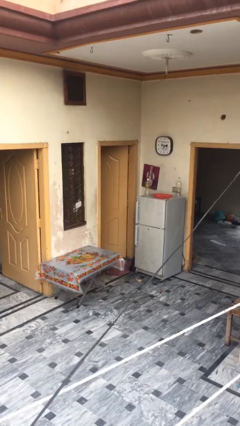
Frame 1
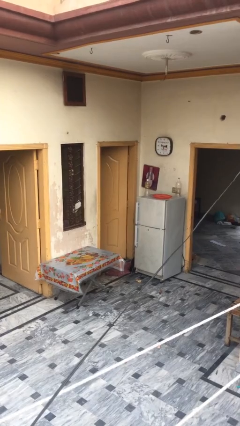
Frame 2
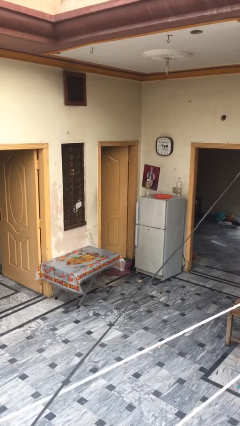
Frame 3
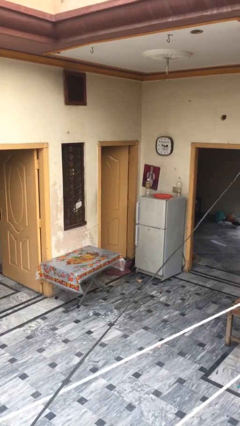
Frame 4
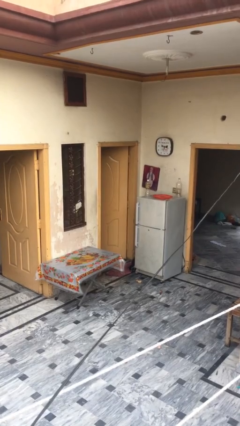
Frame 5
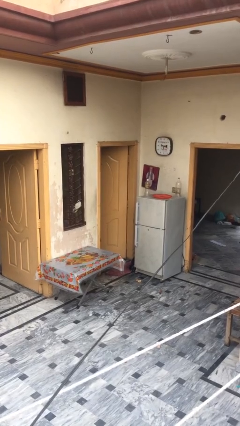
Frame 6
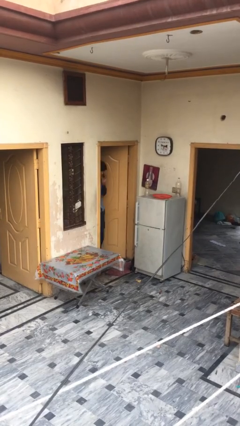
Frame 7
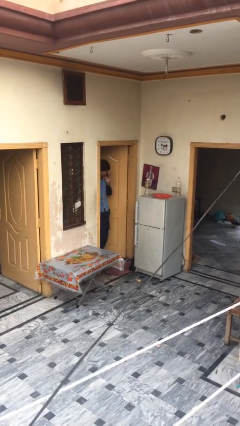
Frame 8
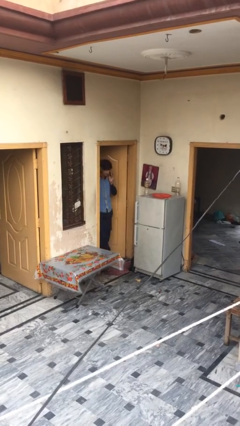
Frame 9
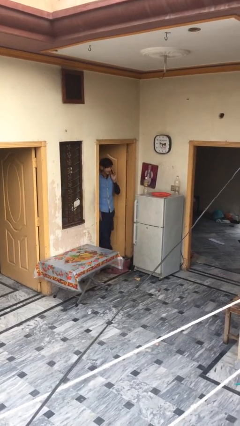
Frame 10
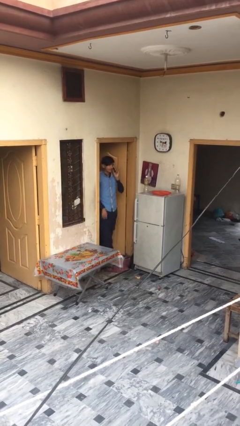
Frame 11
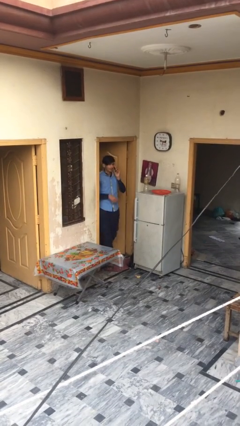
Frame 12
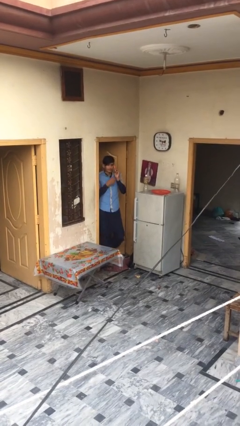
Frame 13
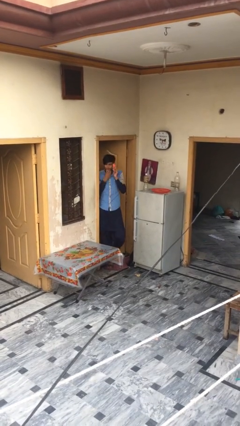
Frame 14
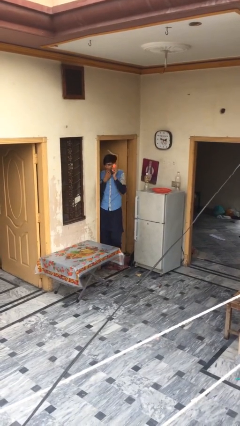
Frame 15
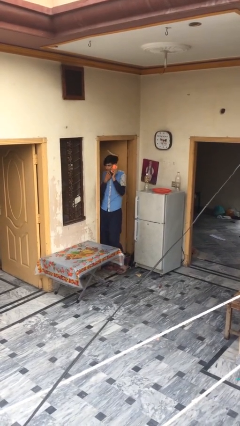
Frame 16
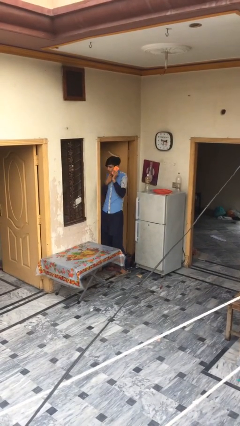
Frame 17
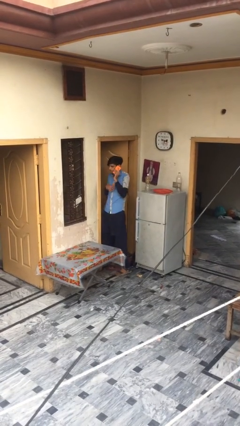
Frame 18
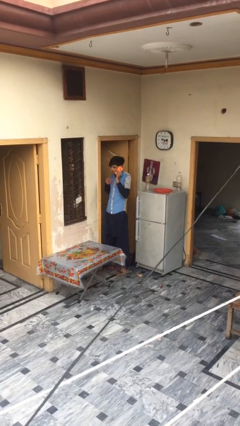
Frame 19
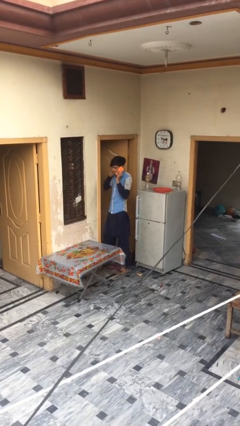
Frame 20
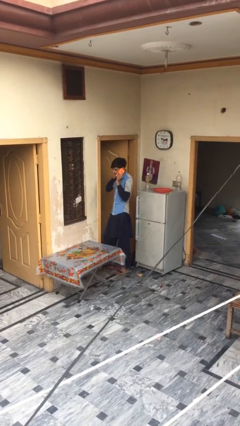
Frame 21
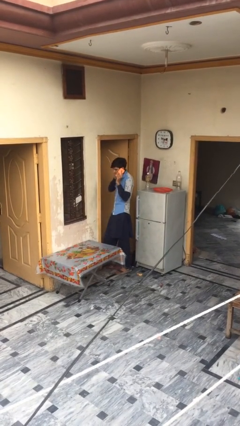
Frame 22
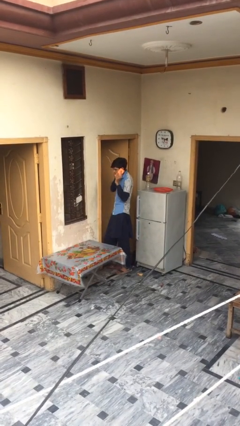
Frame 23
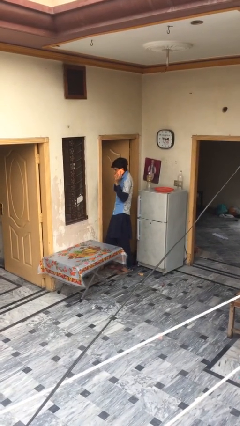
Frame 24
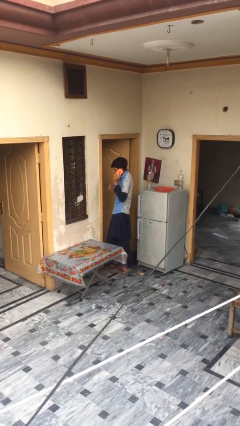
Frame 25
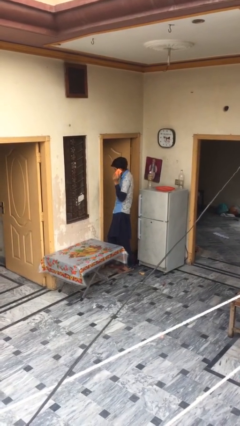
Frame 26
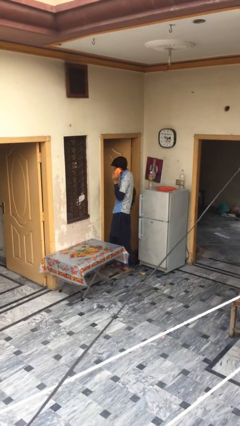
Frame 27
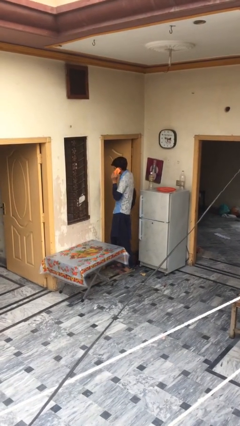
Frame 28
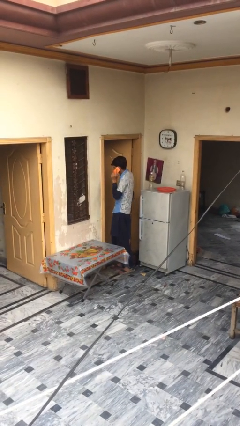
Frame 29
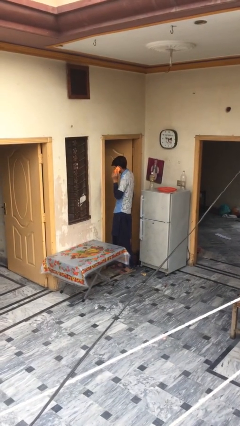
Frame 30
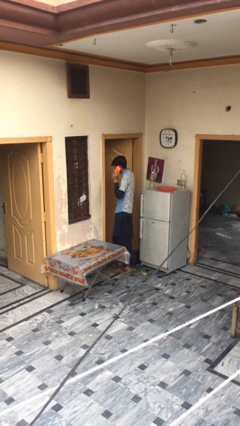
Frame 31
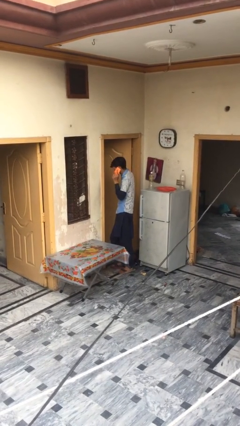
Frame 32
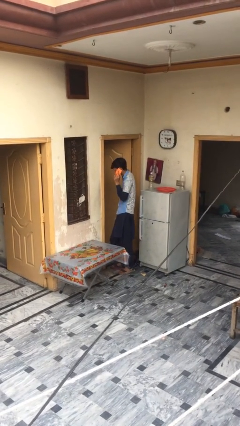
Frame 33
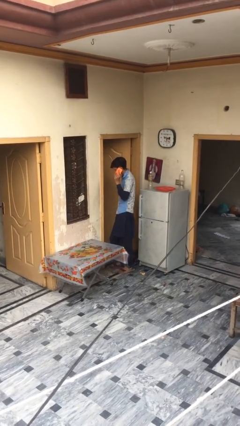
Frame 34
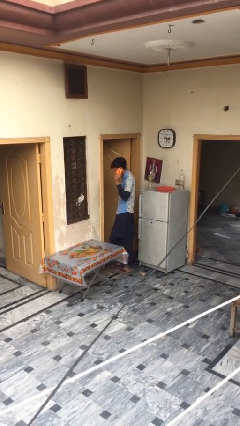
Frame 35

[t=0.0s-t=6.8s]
person enters scene through structure

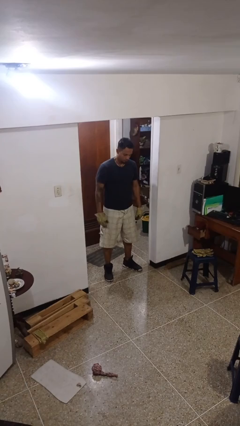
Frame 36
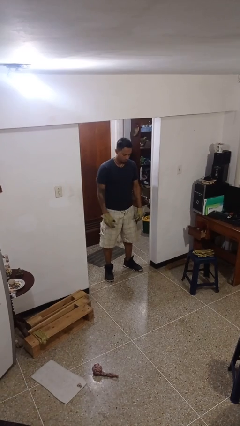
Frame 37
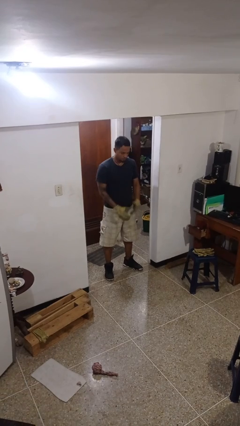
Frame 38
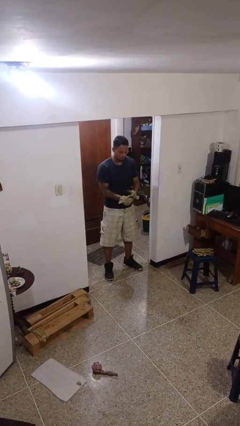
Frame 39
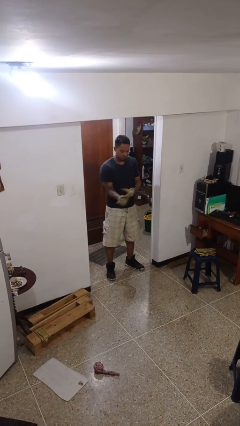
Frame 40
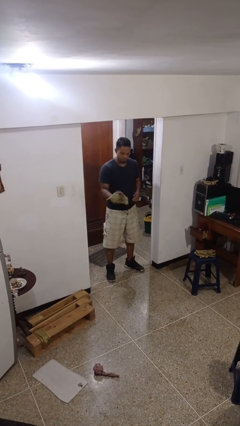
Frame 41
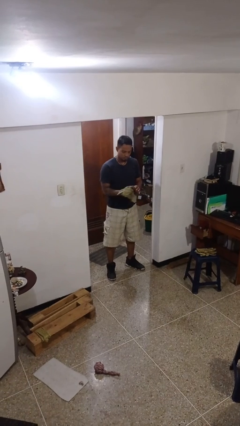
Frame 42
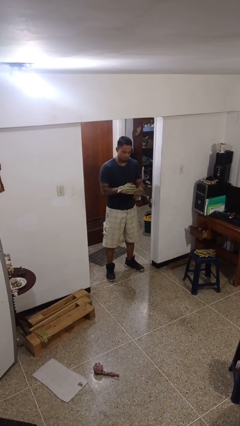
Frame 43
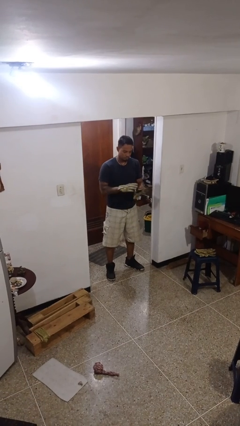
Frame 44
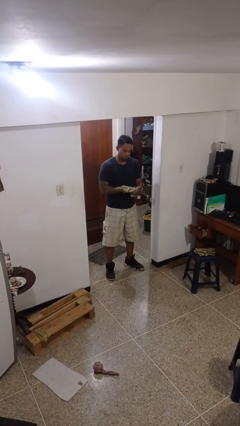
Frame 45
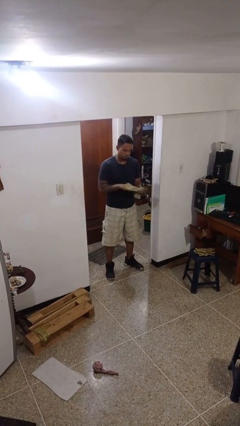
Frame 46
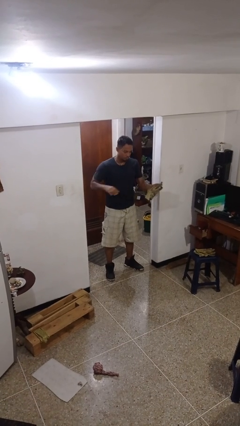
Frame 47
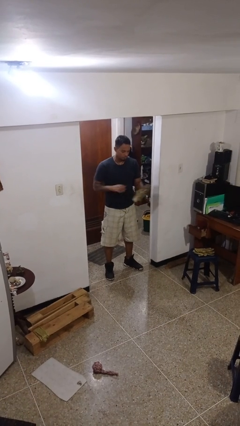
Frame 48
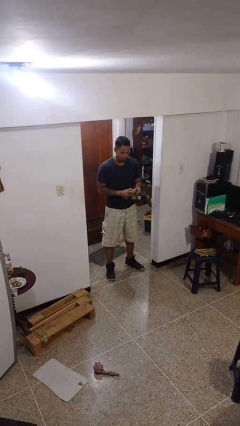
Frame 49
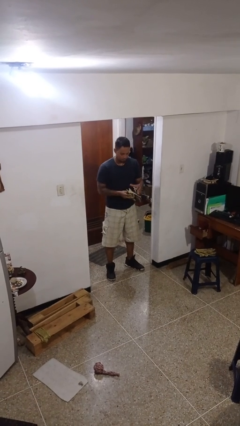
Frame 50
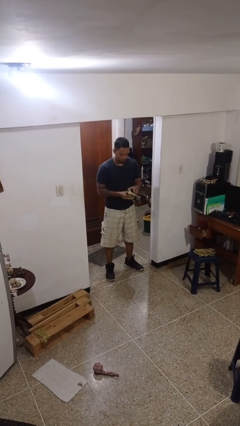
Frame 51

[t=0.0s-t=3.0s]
person takes off gloves

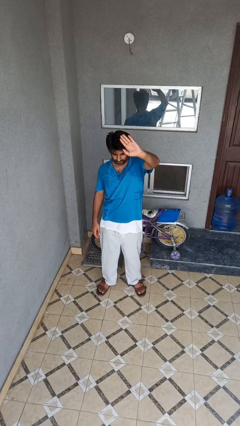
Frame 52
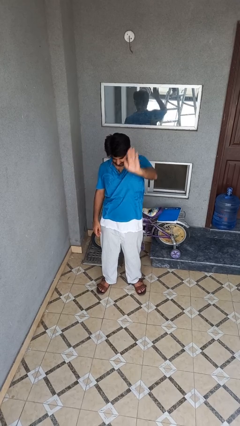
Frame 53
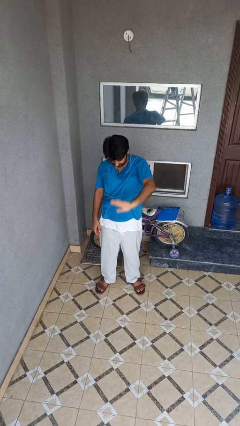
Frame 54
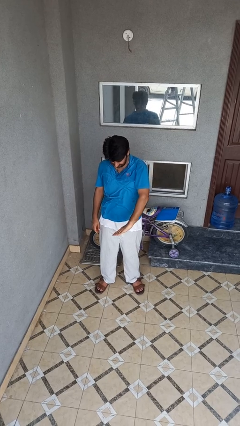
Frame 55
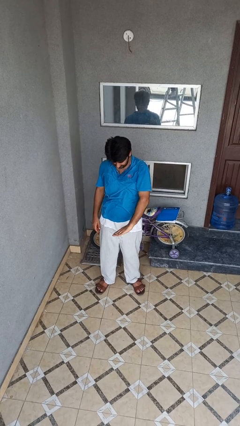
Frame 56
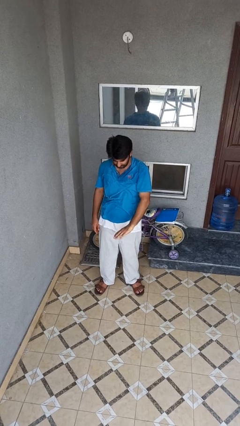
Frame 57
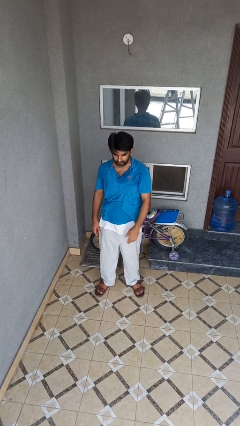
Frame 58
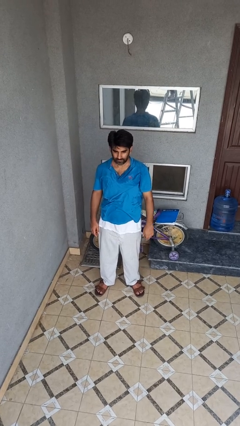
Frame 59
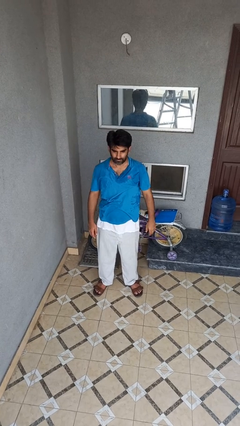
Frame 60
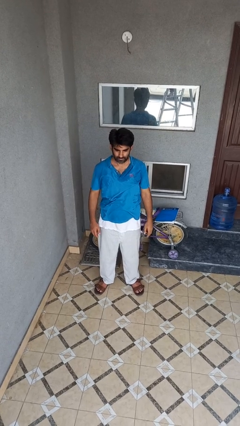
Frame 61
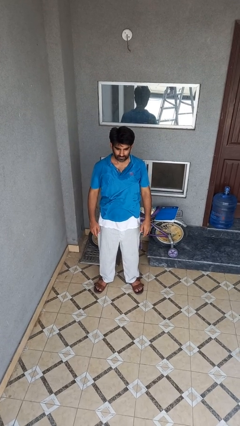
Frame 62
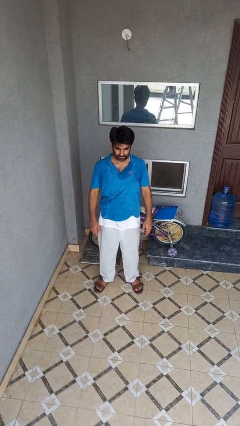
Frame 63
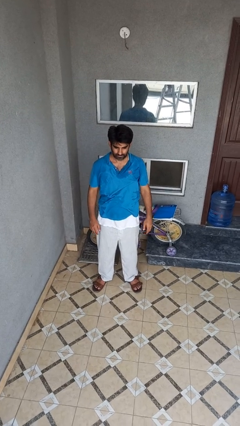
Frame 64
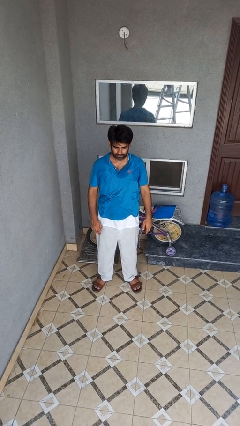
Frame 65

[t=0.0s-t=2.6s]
person gestures swipe down

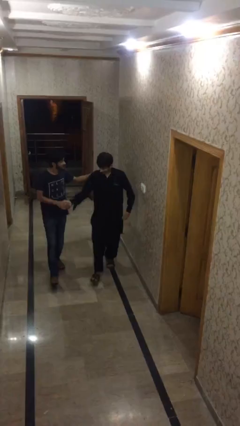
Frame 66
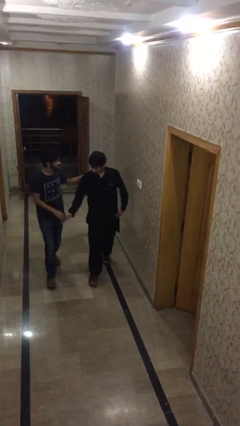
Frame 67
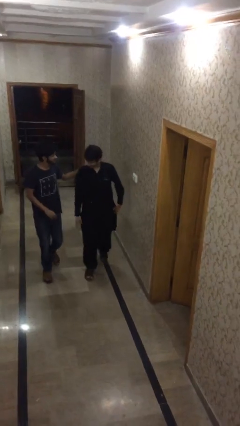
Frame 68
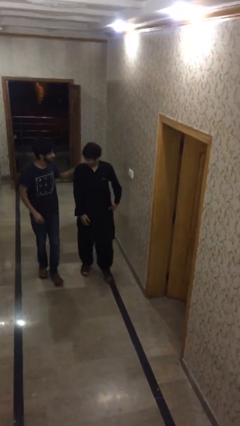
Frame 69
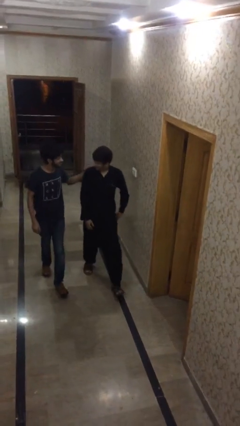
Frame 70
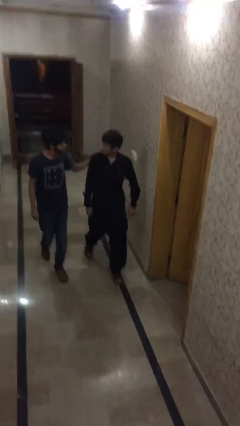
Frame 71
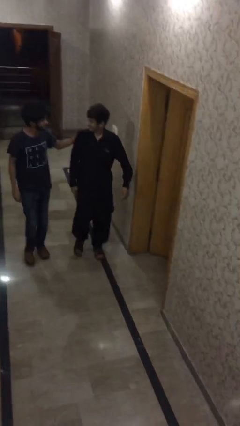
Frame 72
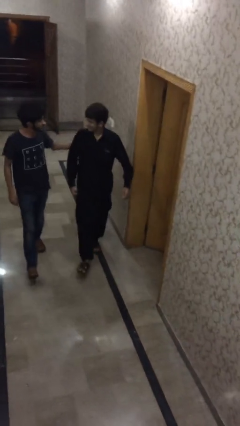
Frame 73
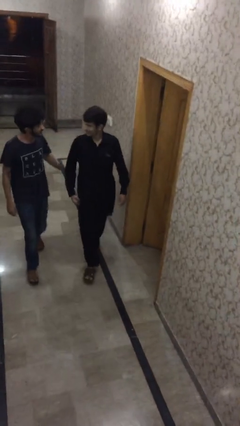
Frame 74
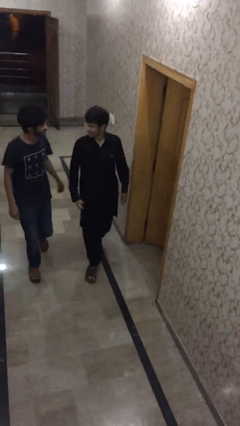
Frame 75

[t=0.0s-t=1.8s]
person talks to person

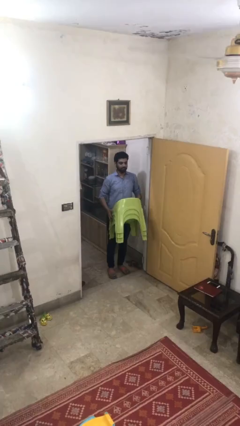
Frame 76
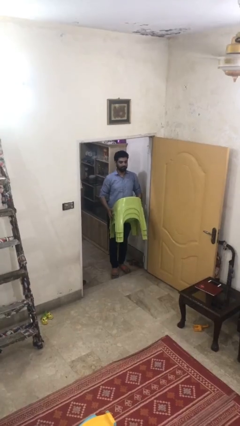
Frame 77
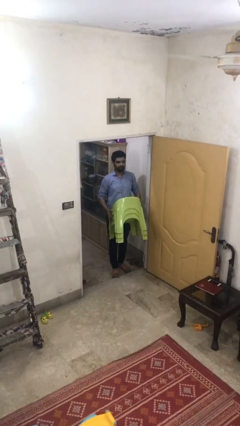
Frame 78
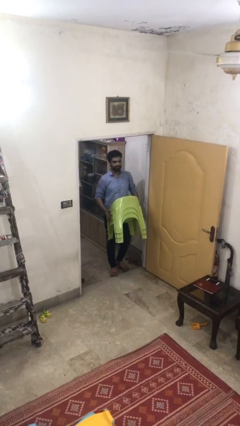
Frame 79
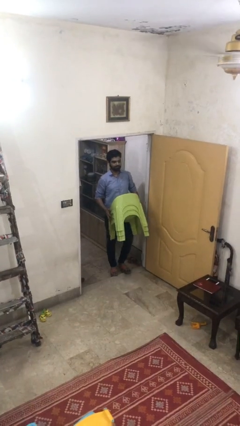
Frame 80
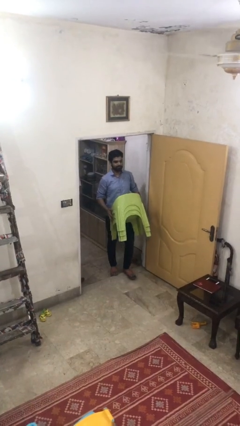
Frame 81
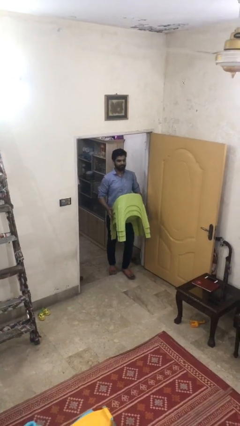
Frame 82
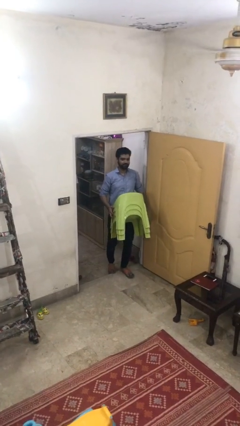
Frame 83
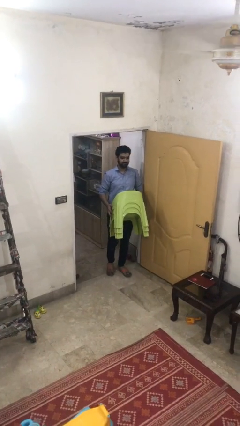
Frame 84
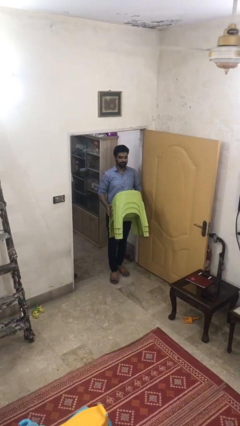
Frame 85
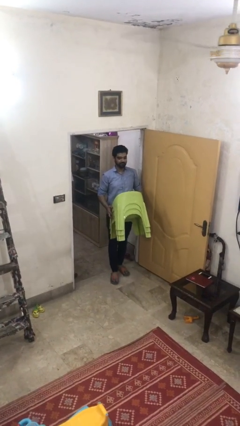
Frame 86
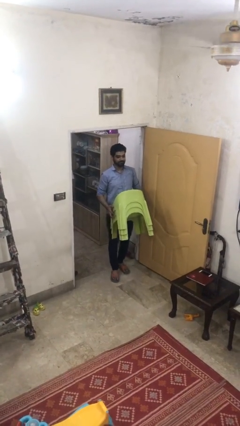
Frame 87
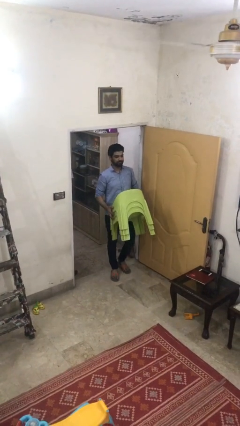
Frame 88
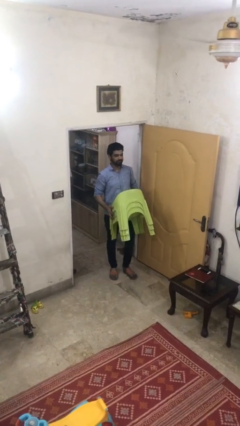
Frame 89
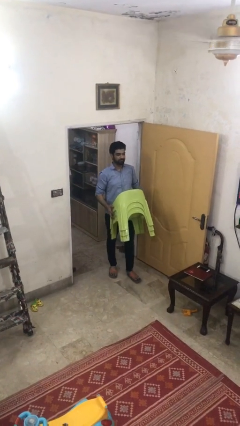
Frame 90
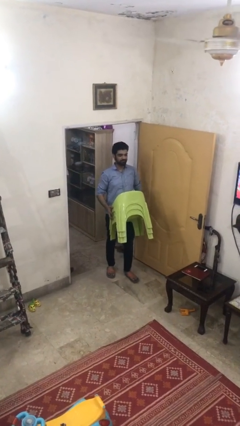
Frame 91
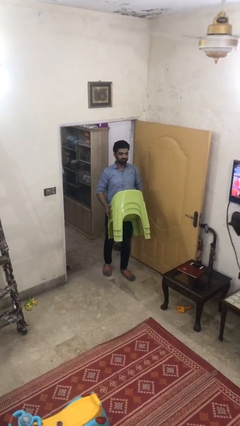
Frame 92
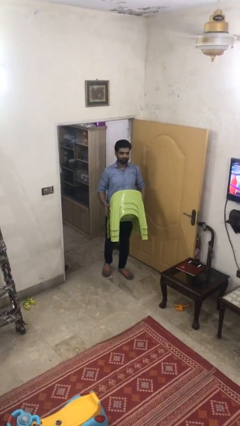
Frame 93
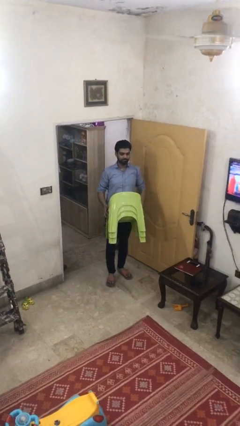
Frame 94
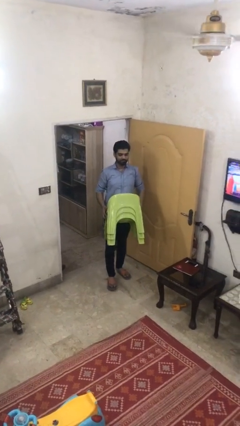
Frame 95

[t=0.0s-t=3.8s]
person carries heavy object
